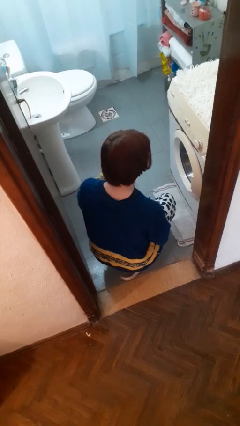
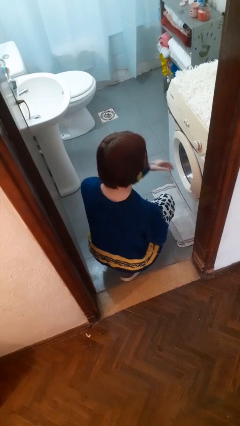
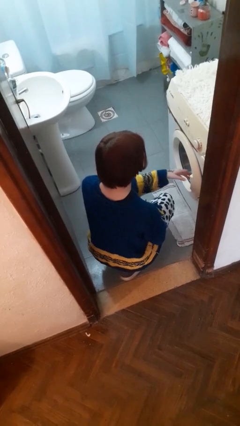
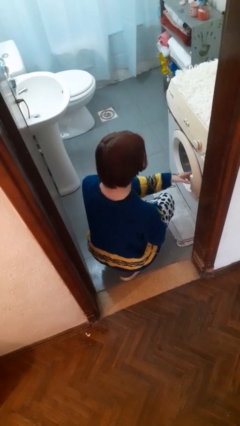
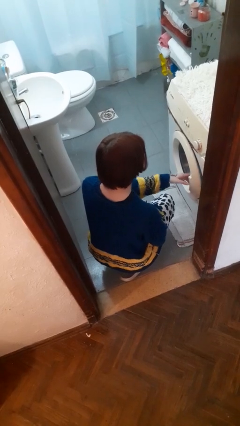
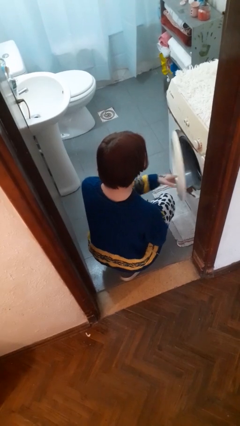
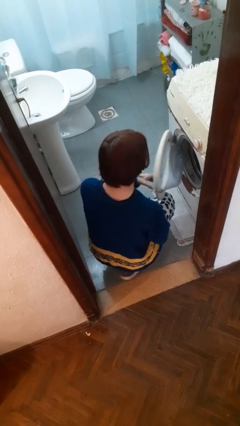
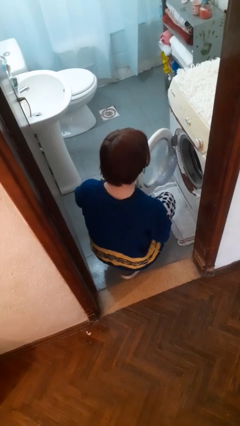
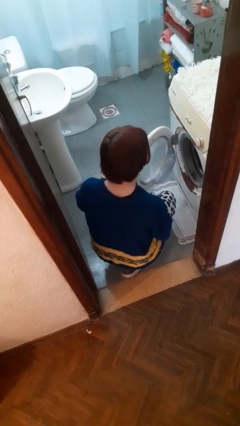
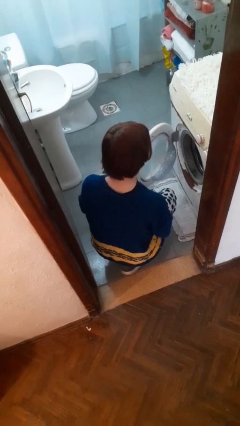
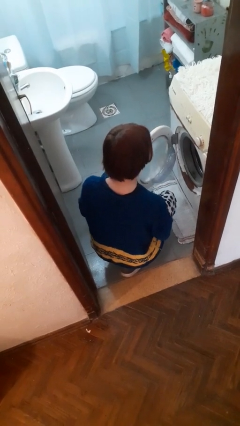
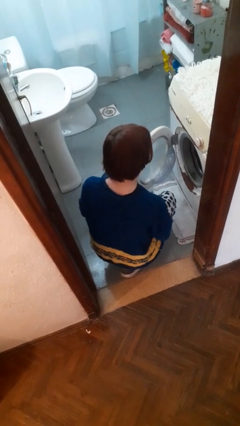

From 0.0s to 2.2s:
person opens clothes washer

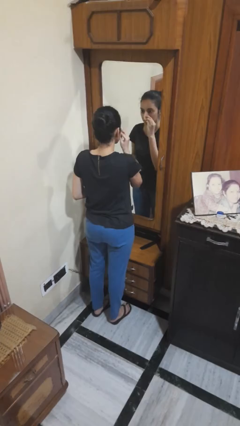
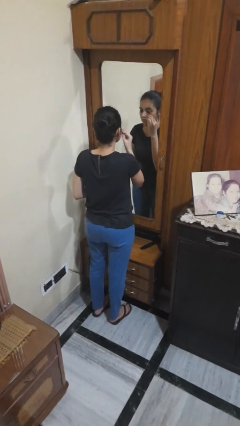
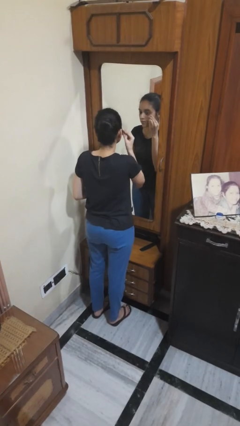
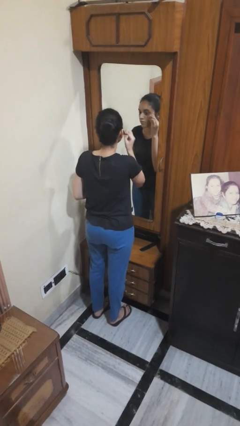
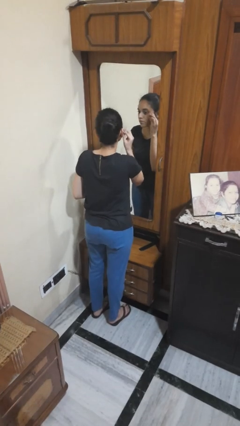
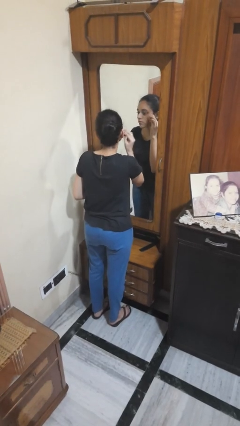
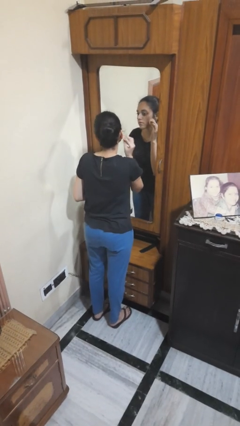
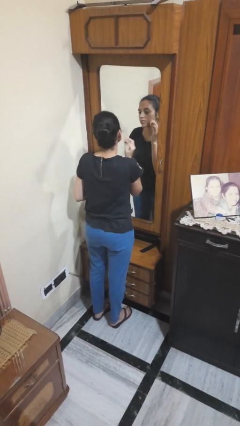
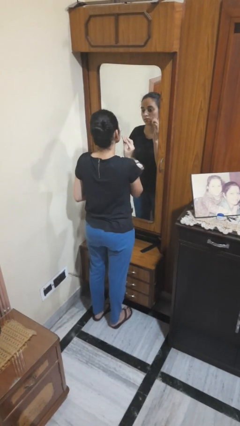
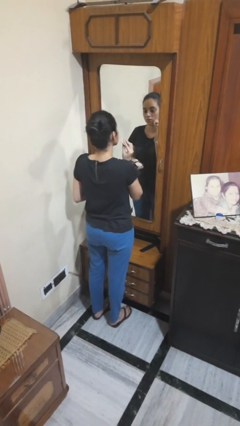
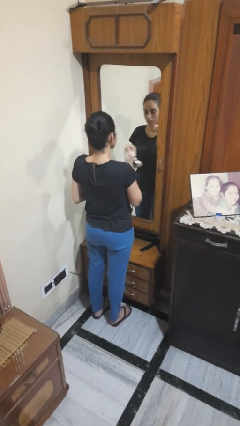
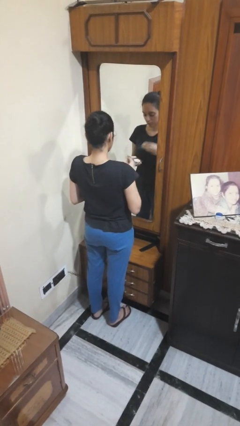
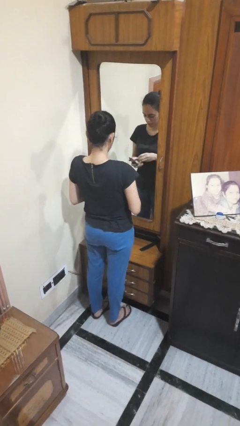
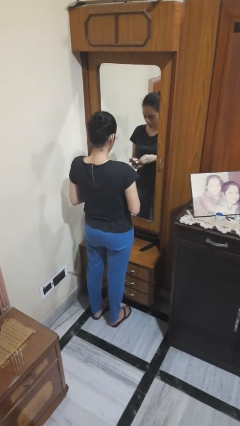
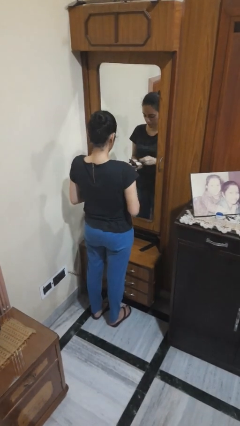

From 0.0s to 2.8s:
person applies foundation makeup

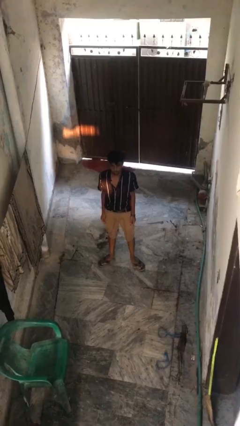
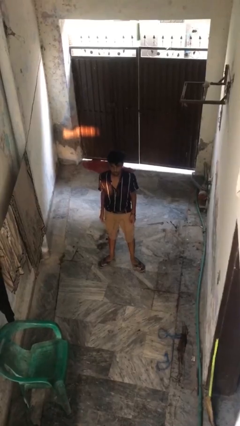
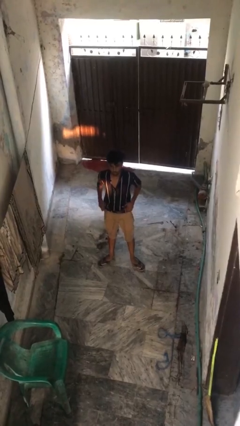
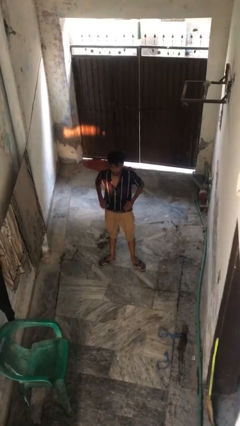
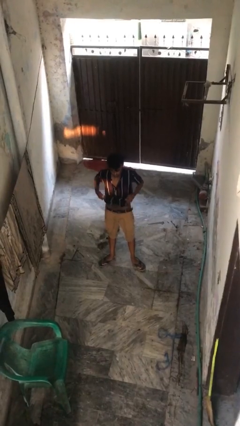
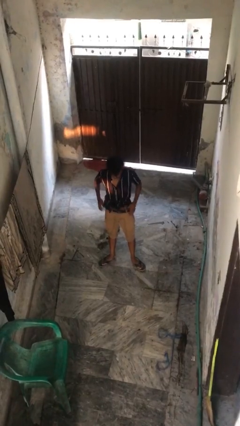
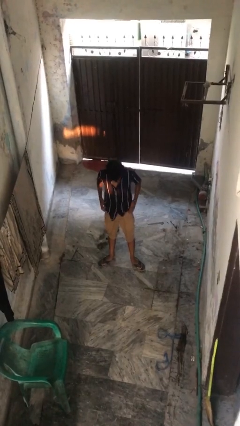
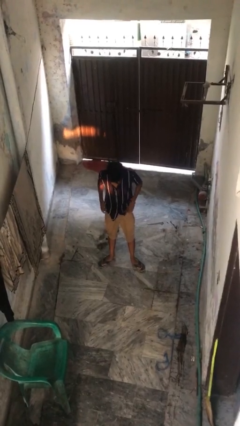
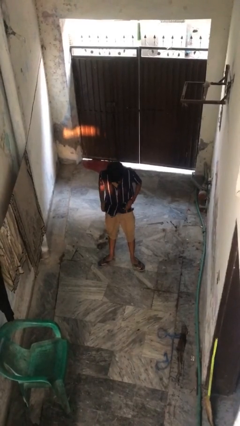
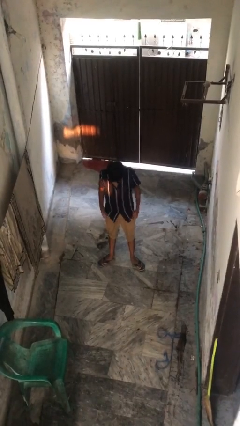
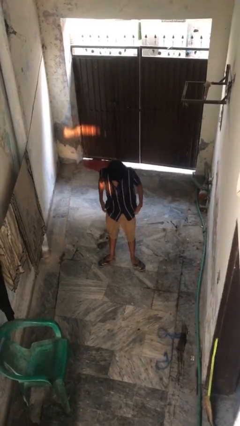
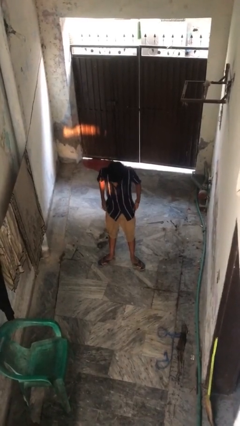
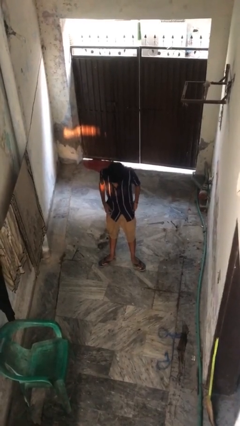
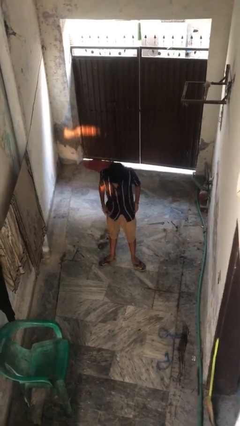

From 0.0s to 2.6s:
person untucks shirt

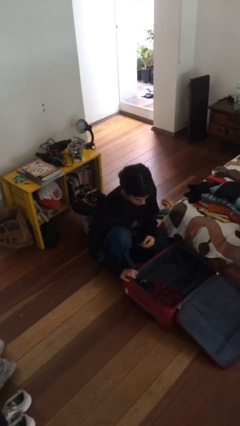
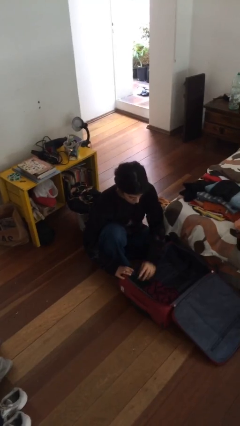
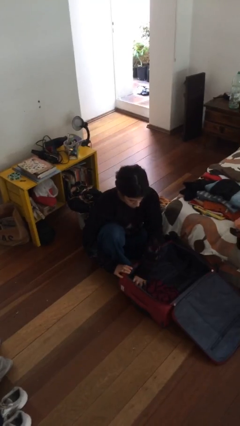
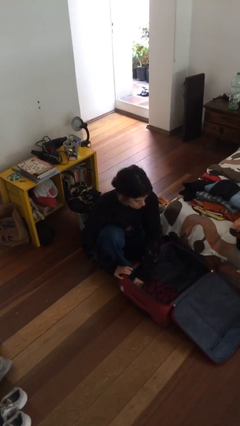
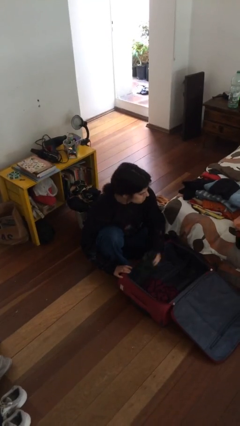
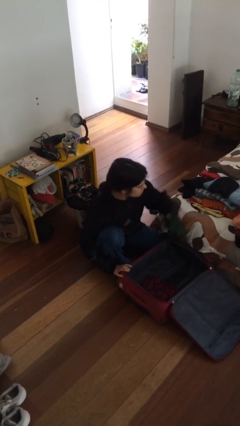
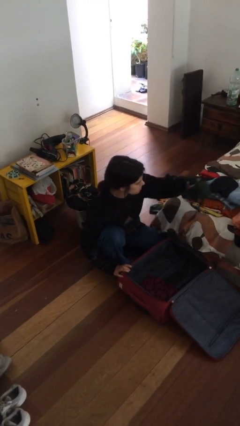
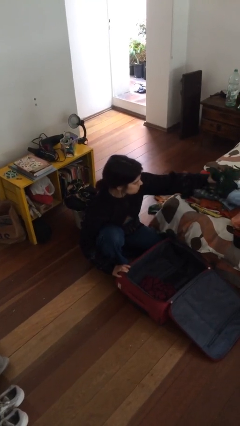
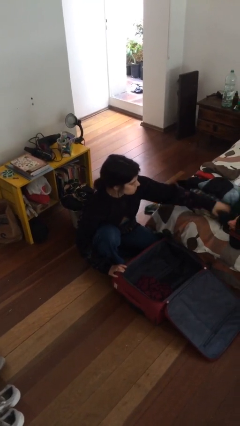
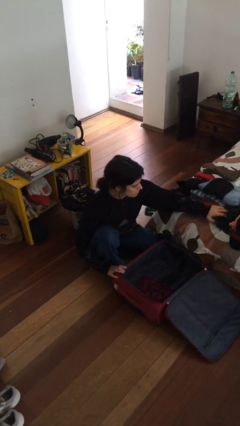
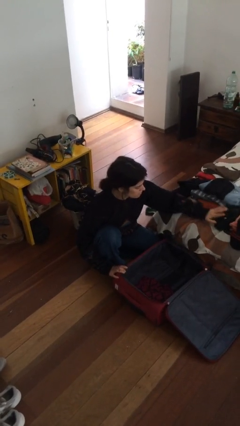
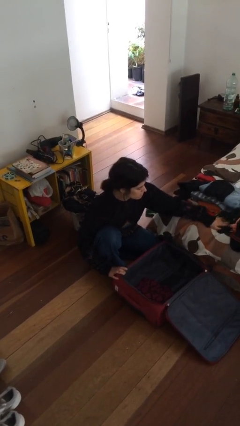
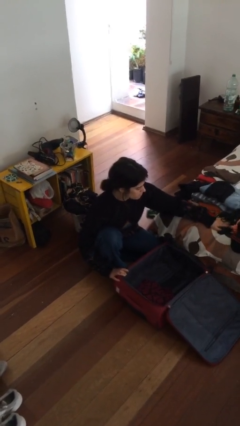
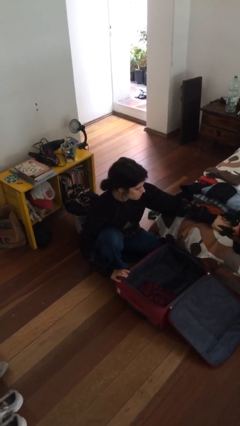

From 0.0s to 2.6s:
person unloads clothes from suitcase

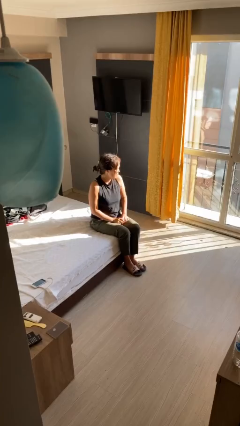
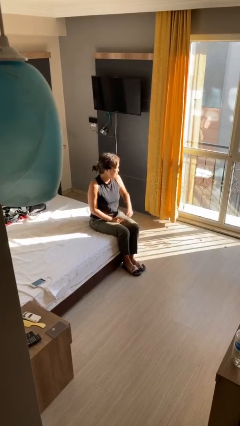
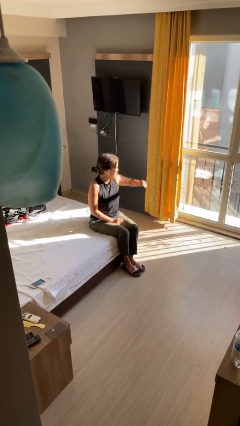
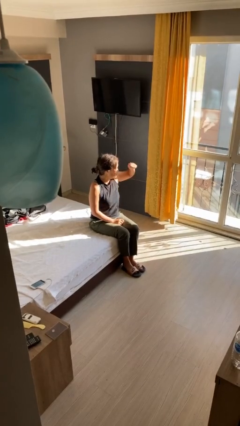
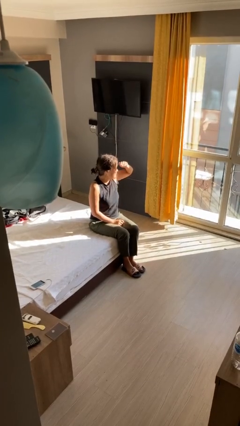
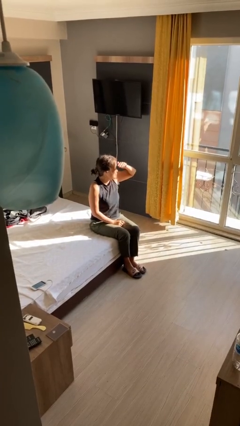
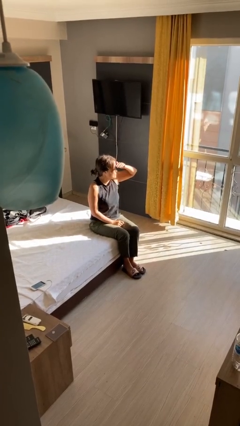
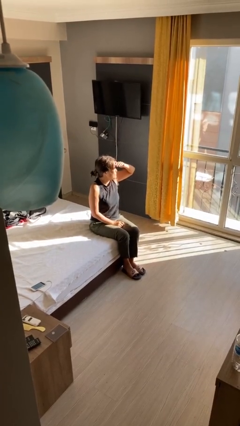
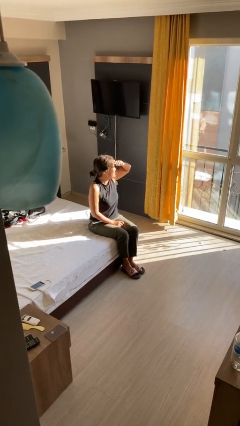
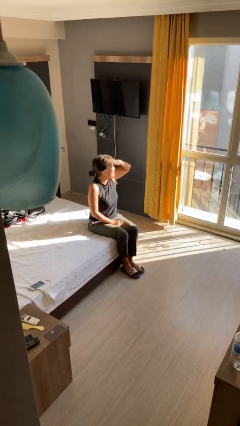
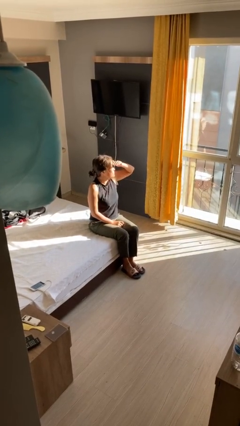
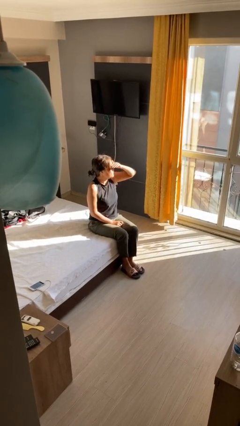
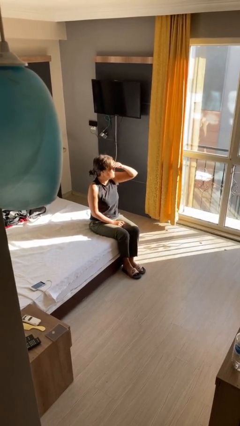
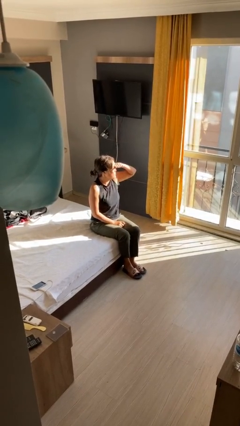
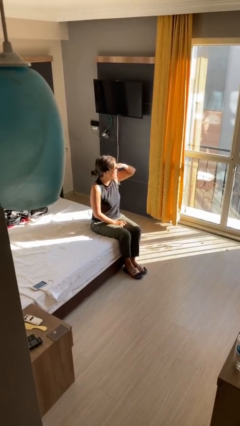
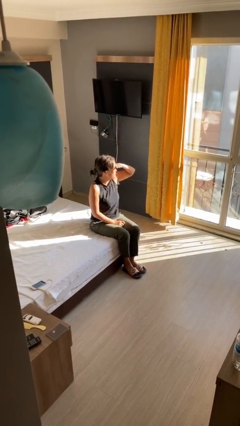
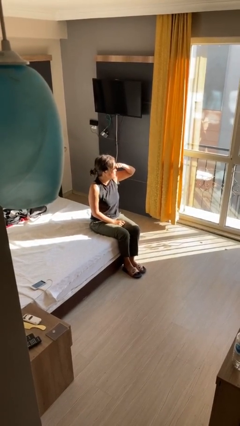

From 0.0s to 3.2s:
person shades eyes

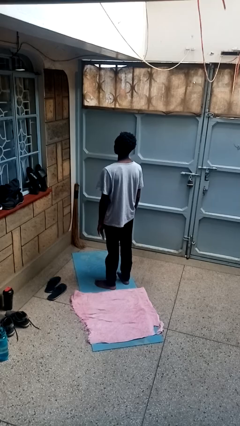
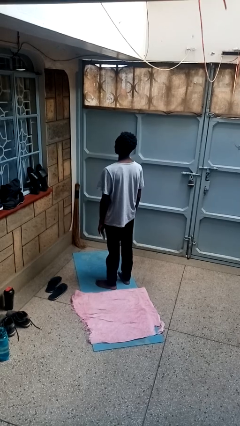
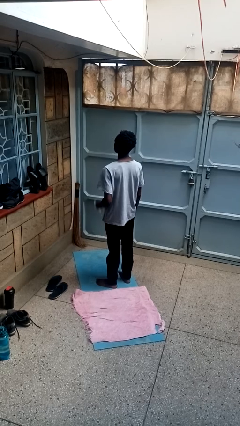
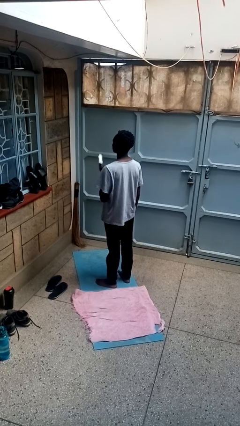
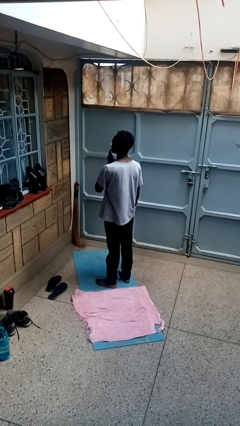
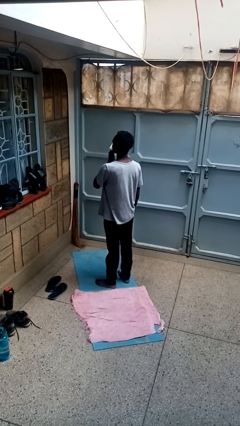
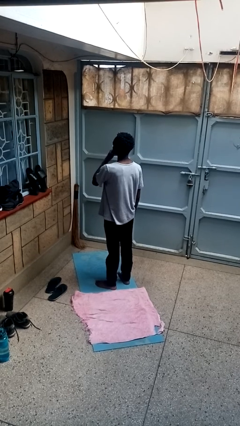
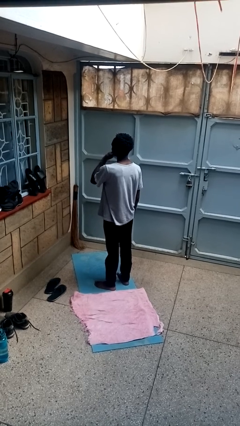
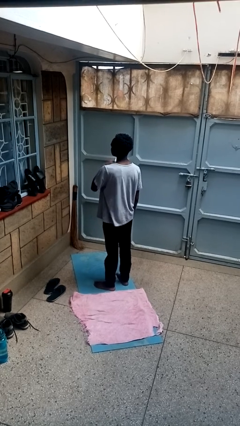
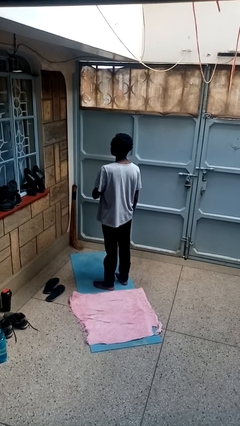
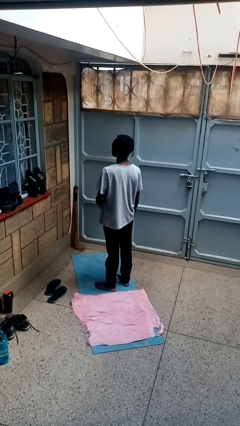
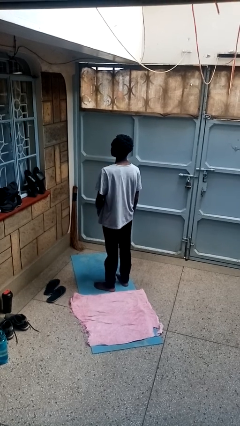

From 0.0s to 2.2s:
person wipes mouth with napkin

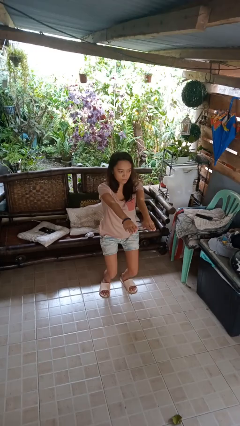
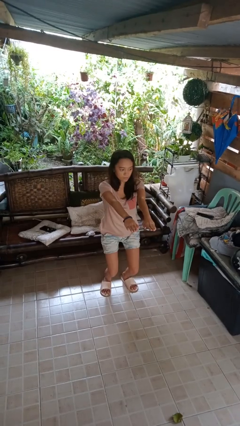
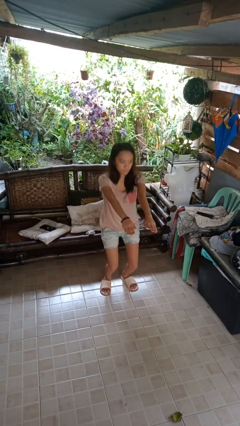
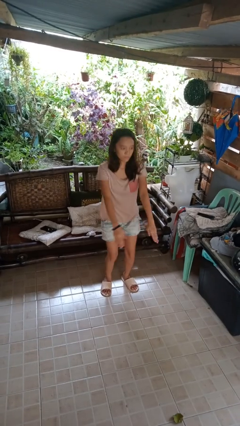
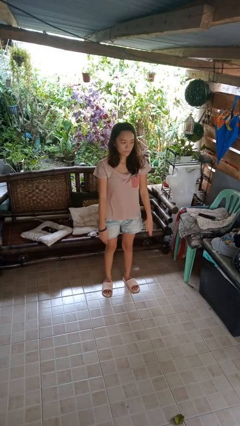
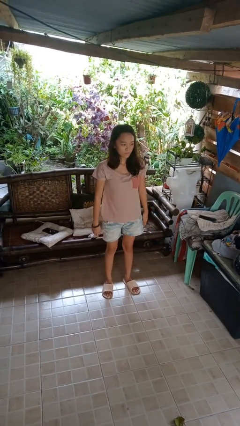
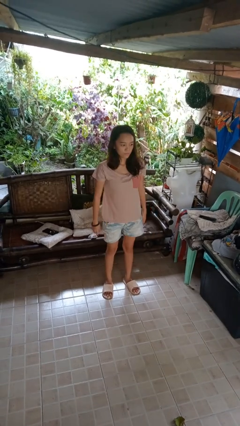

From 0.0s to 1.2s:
person stands up

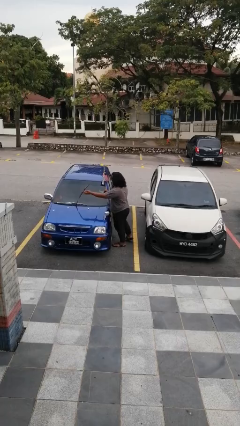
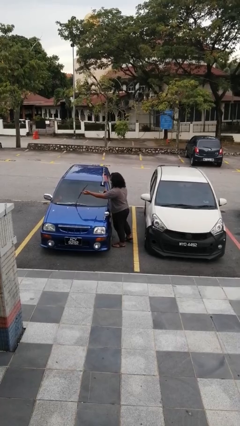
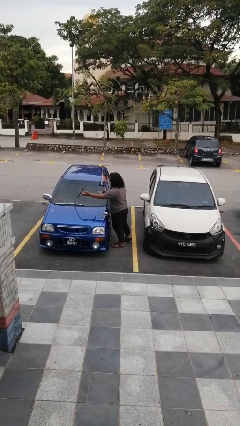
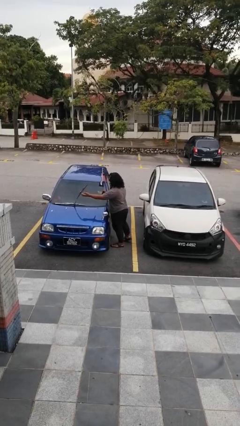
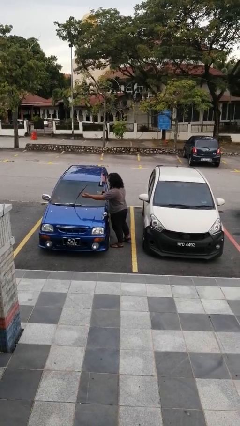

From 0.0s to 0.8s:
person flips up car wipers
